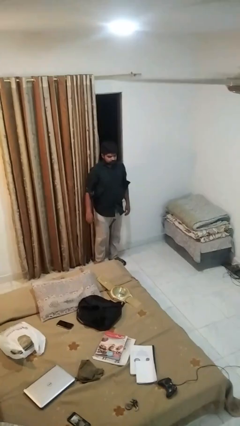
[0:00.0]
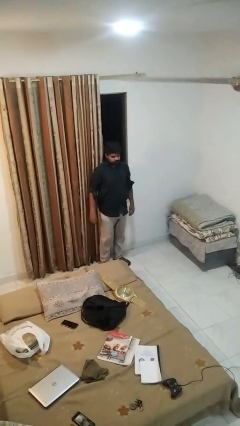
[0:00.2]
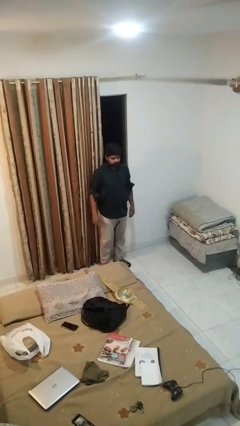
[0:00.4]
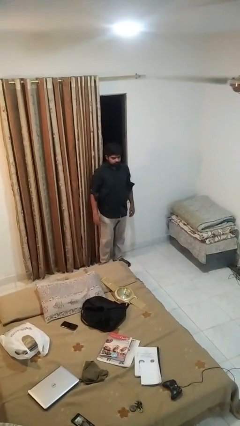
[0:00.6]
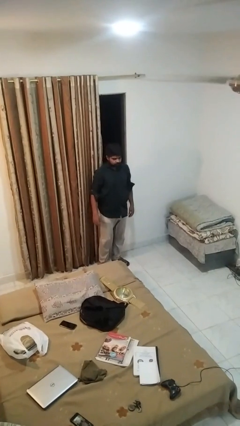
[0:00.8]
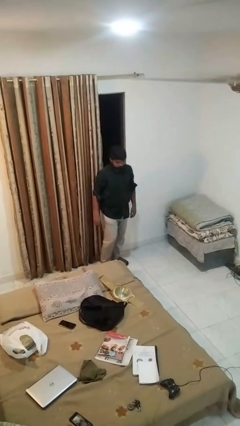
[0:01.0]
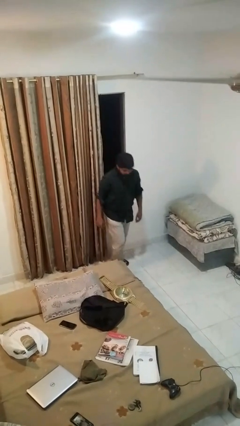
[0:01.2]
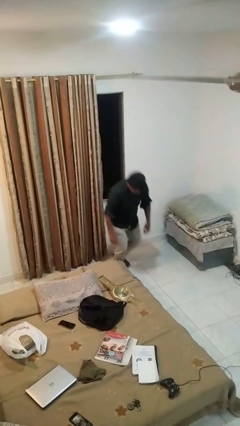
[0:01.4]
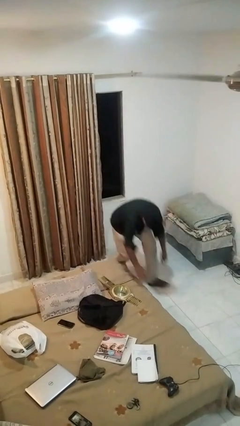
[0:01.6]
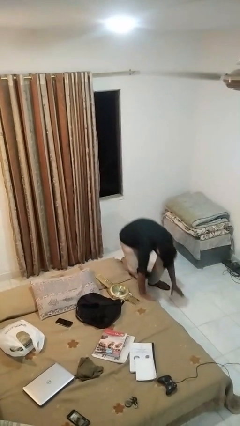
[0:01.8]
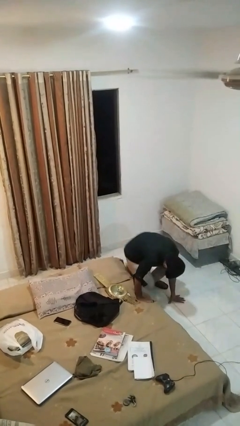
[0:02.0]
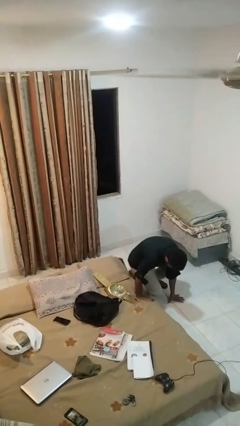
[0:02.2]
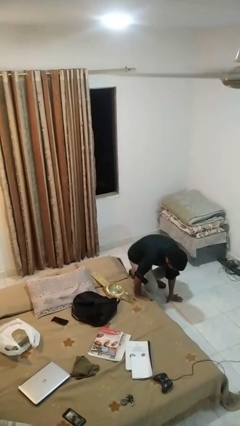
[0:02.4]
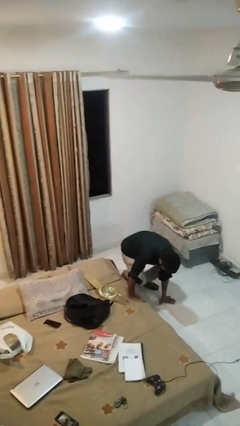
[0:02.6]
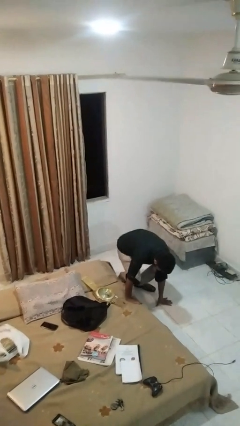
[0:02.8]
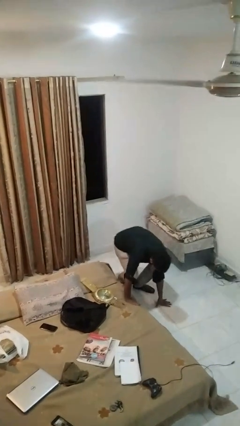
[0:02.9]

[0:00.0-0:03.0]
person trips on object on floor

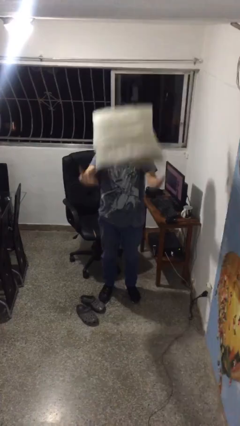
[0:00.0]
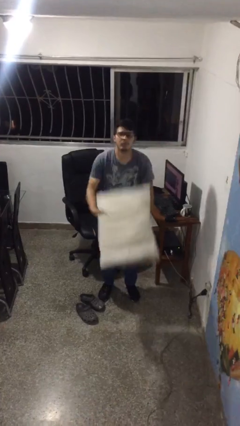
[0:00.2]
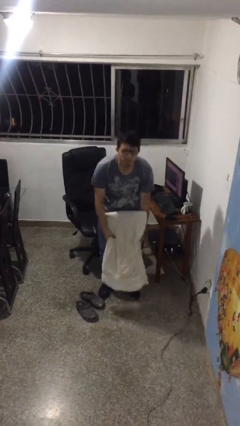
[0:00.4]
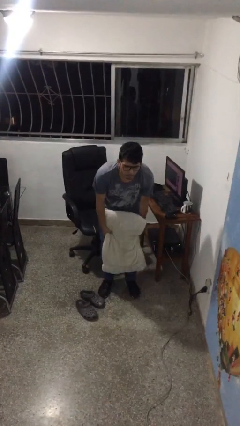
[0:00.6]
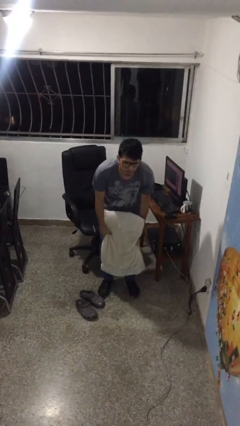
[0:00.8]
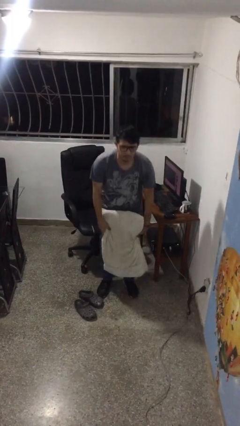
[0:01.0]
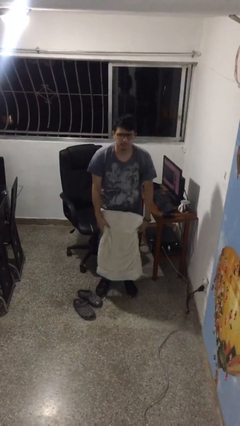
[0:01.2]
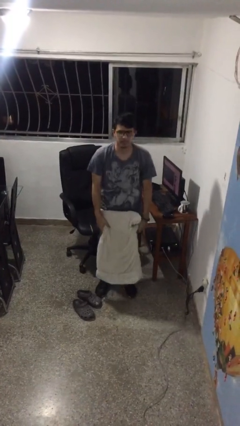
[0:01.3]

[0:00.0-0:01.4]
person catches dropped object

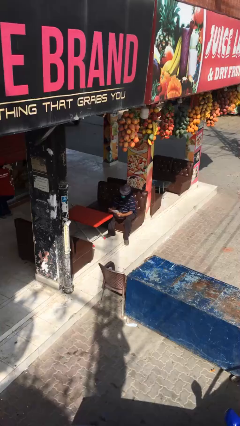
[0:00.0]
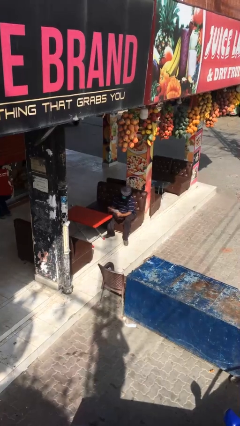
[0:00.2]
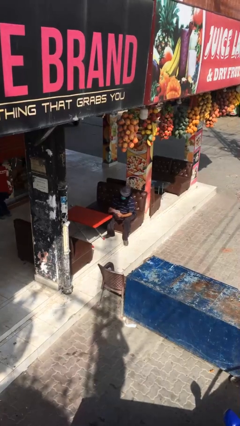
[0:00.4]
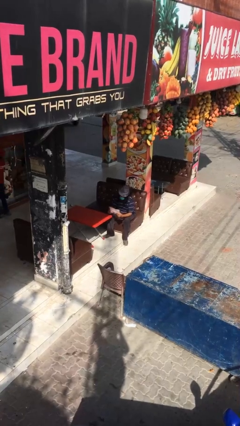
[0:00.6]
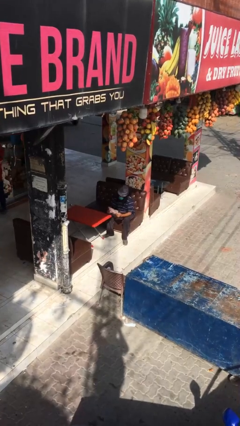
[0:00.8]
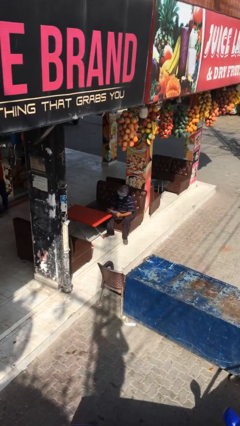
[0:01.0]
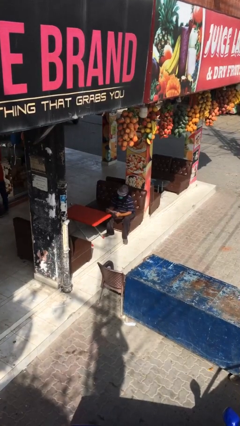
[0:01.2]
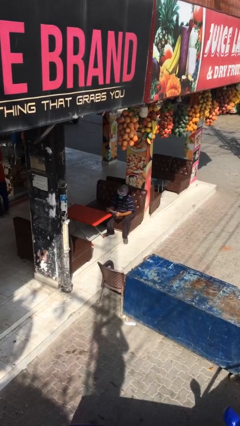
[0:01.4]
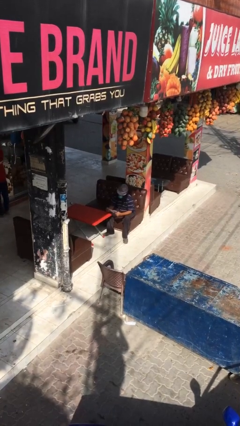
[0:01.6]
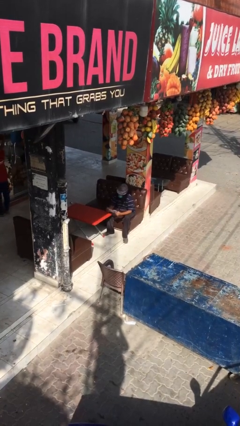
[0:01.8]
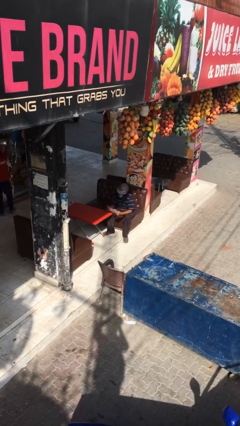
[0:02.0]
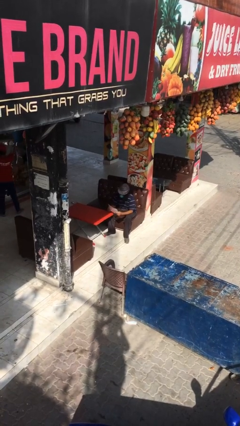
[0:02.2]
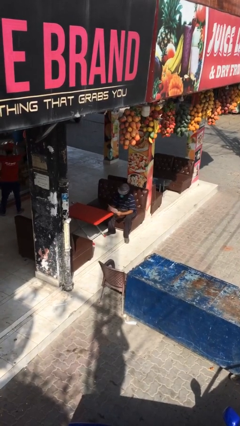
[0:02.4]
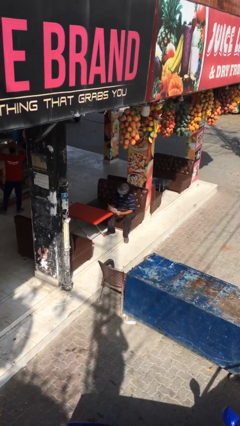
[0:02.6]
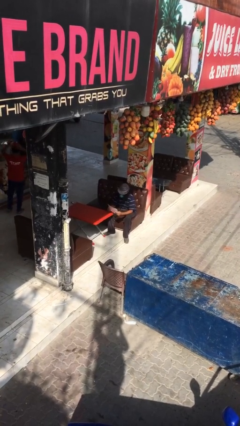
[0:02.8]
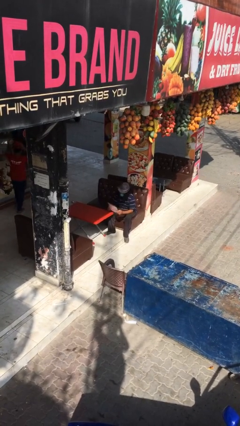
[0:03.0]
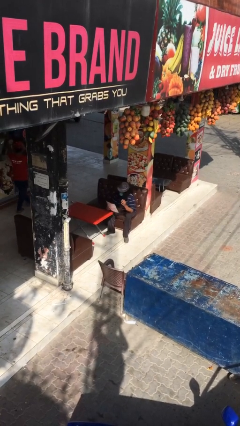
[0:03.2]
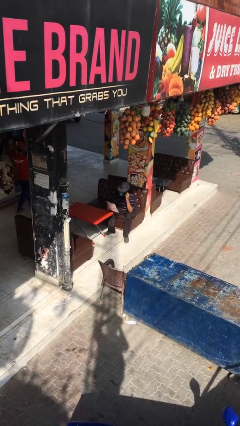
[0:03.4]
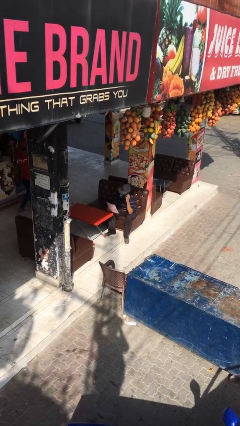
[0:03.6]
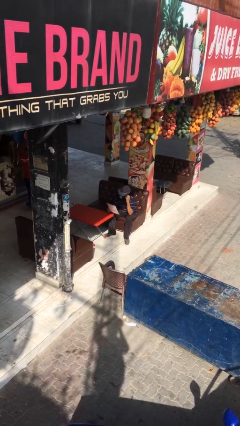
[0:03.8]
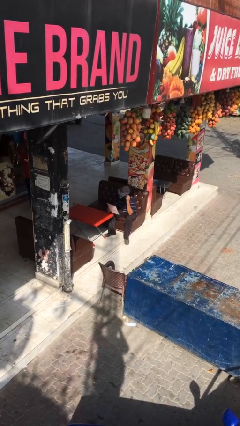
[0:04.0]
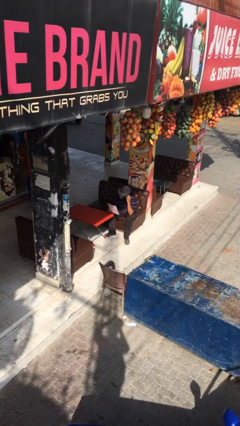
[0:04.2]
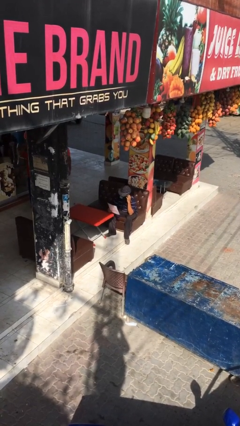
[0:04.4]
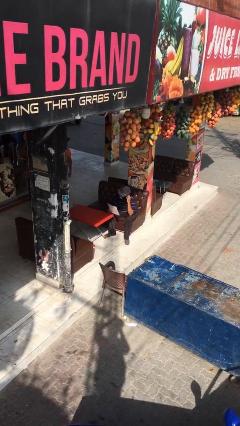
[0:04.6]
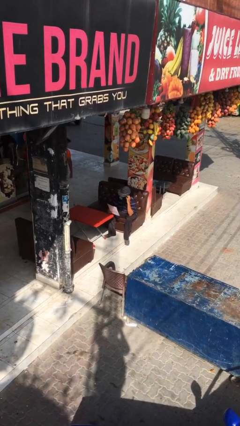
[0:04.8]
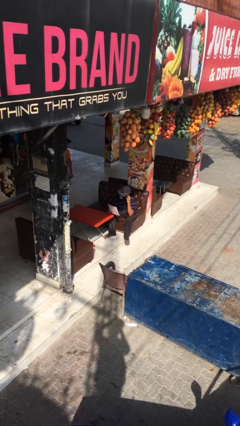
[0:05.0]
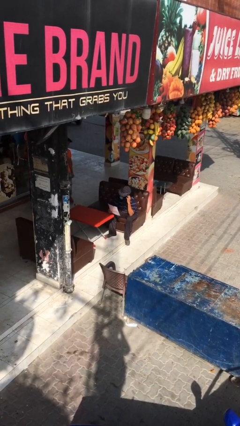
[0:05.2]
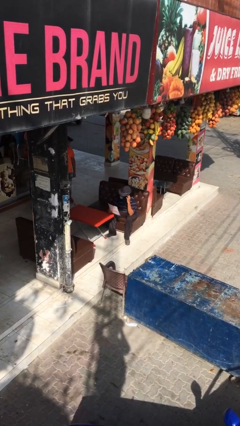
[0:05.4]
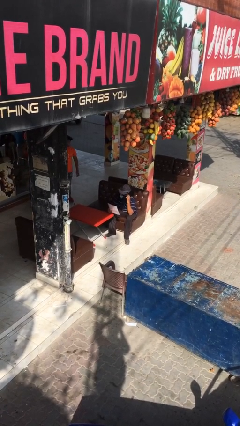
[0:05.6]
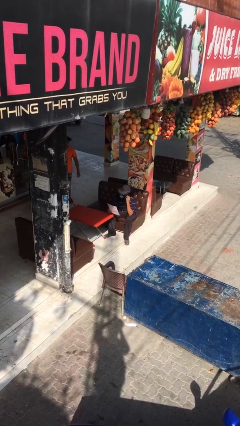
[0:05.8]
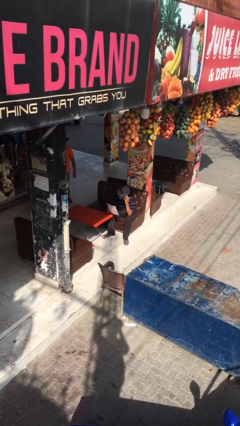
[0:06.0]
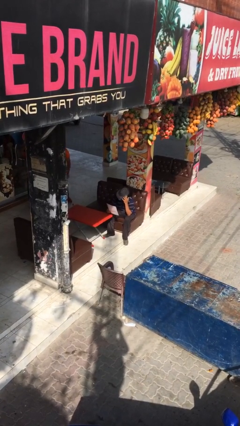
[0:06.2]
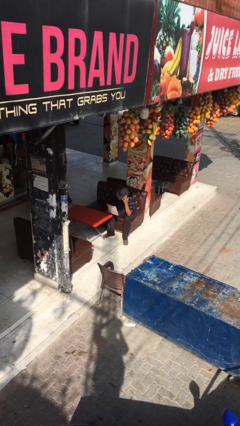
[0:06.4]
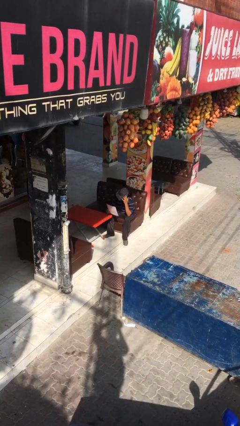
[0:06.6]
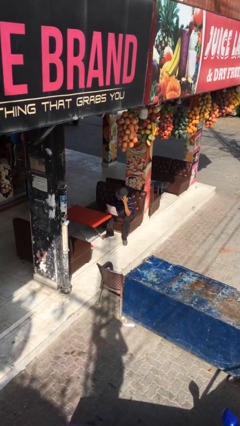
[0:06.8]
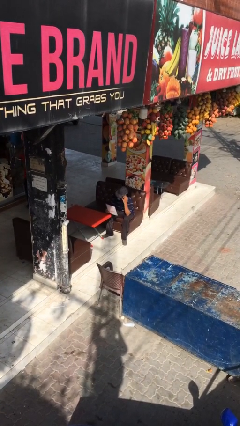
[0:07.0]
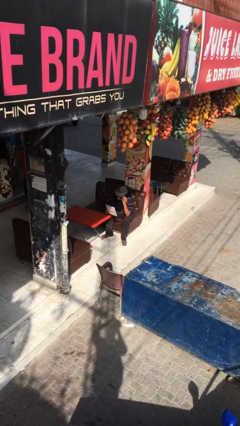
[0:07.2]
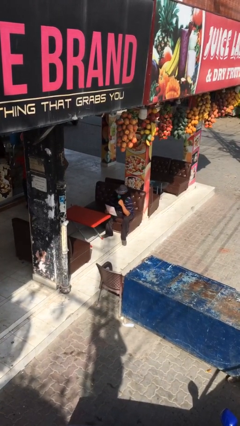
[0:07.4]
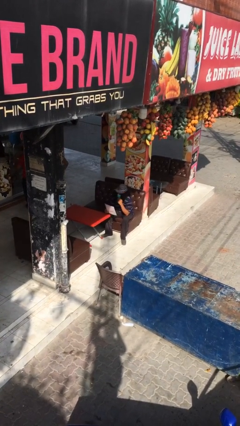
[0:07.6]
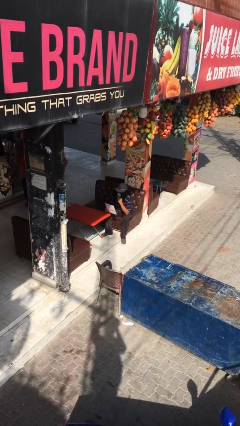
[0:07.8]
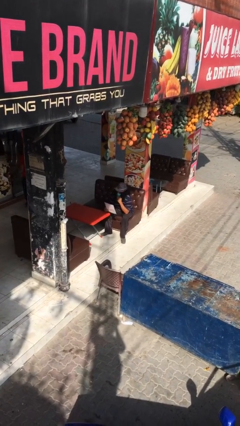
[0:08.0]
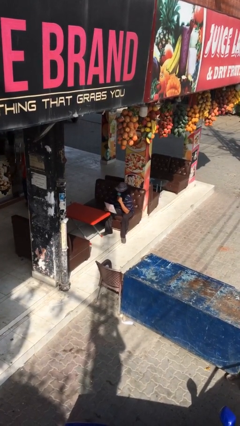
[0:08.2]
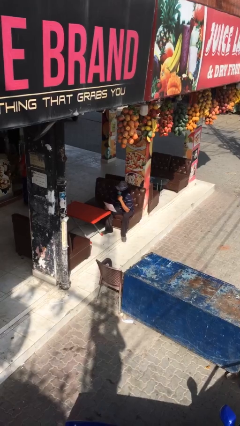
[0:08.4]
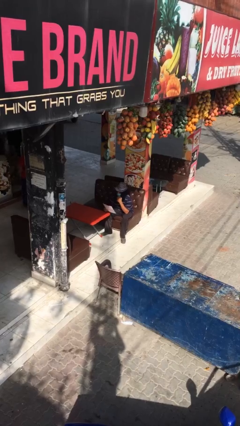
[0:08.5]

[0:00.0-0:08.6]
person reads document

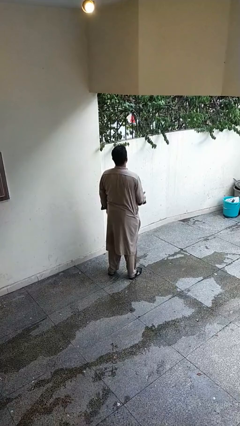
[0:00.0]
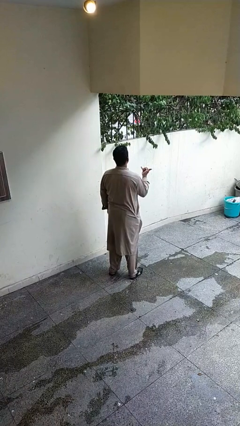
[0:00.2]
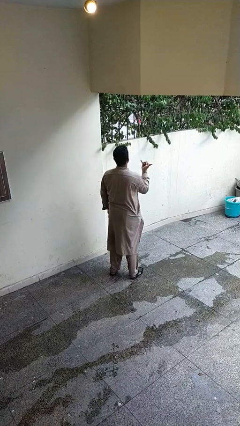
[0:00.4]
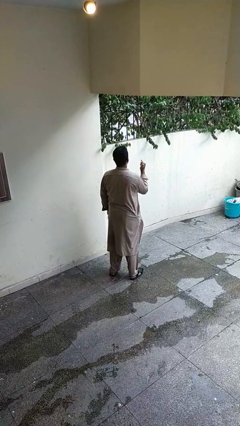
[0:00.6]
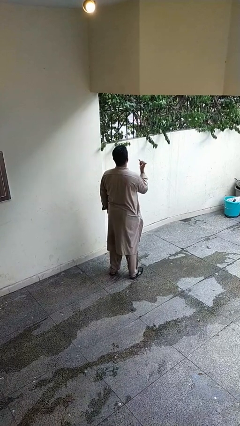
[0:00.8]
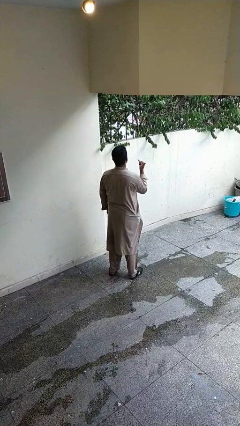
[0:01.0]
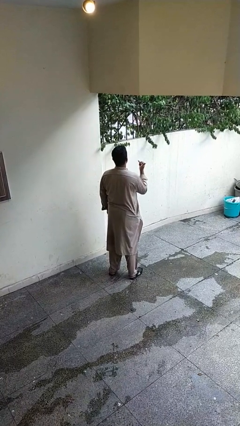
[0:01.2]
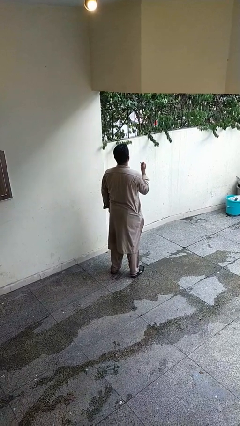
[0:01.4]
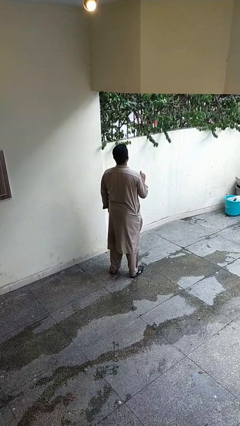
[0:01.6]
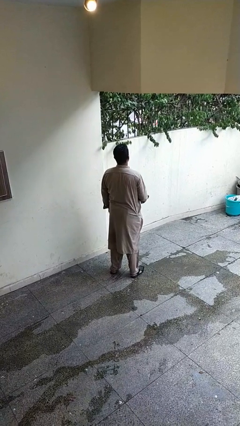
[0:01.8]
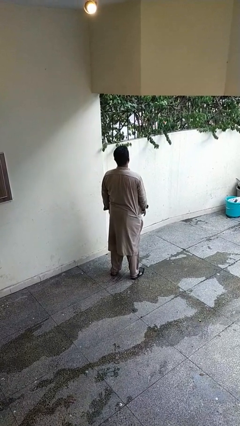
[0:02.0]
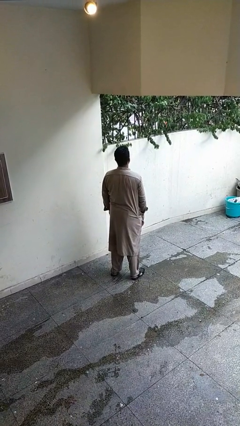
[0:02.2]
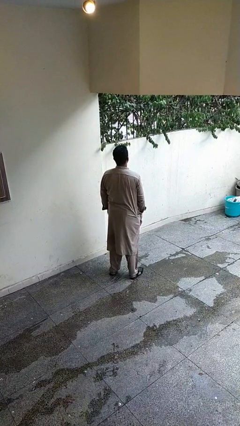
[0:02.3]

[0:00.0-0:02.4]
person gestures hang loose

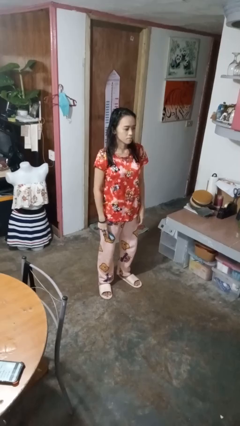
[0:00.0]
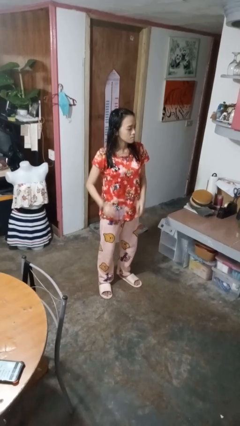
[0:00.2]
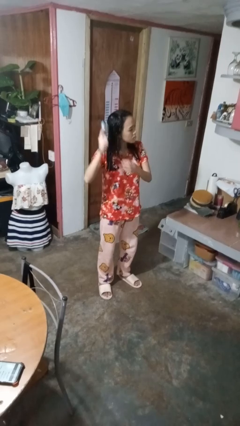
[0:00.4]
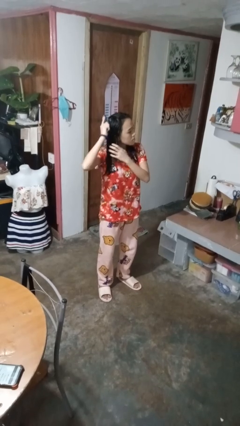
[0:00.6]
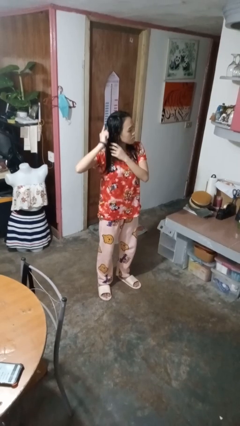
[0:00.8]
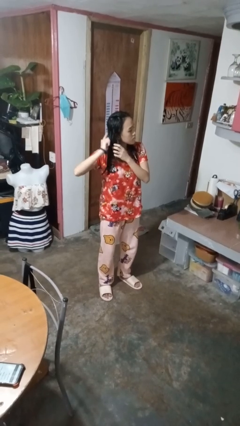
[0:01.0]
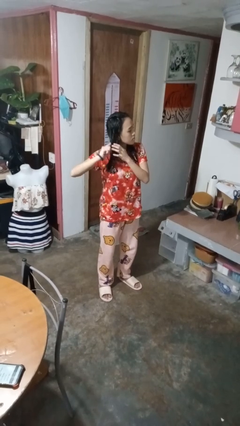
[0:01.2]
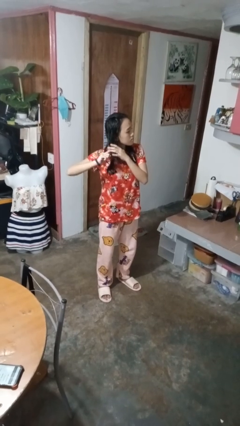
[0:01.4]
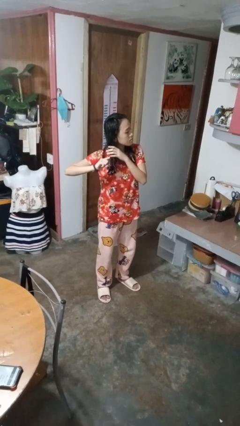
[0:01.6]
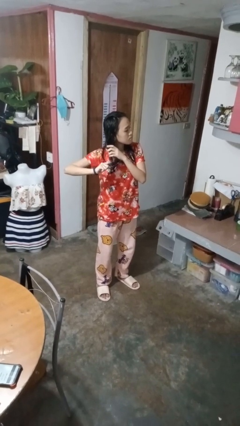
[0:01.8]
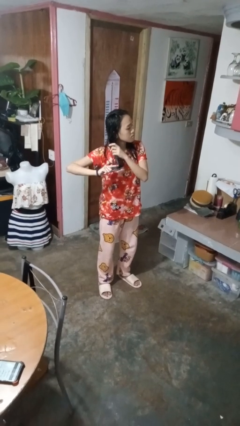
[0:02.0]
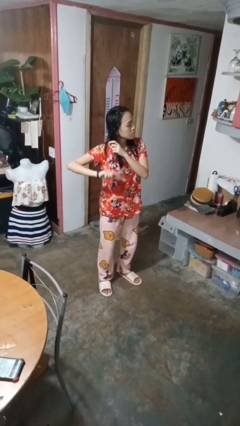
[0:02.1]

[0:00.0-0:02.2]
person brushes hair

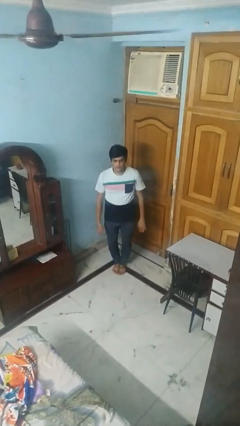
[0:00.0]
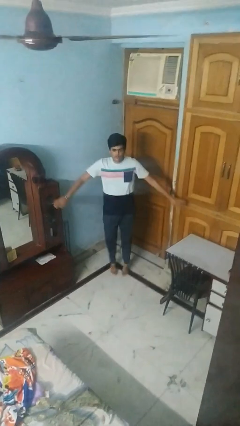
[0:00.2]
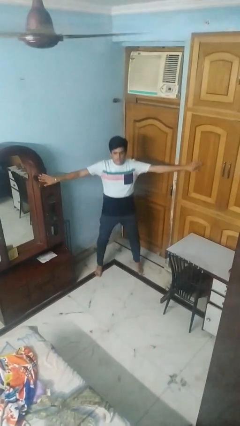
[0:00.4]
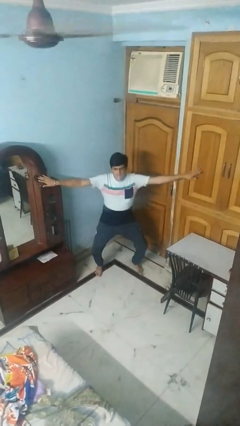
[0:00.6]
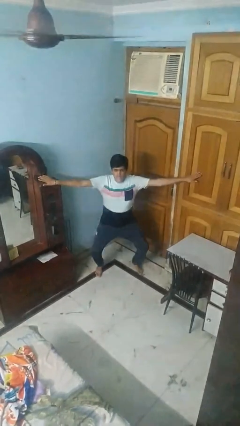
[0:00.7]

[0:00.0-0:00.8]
person exercises with jumping jacks
